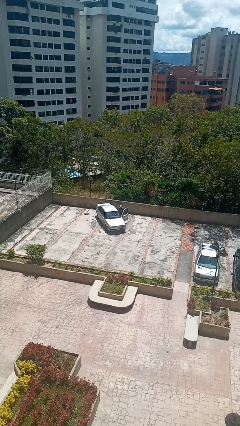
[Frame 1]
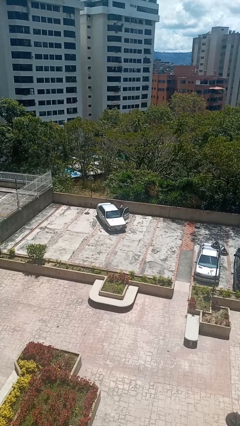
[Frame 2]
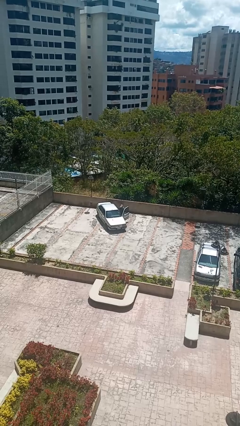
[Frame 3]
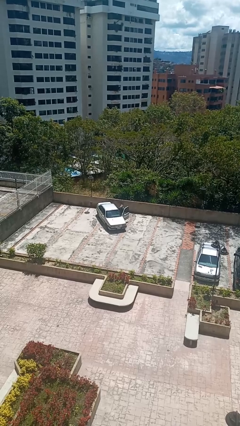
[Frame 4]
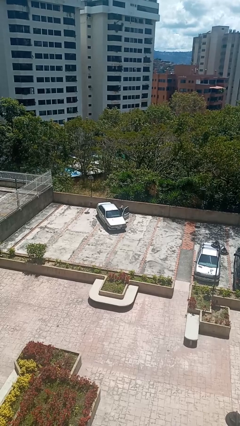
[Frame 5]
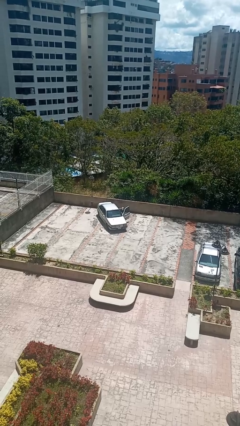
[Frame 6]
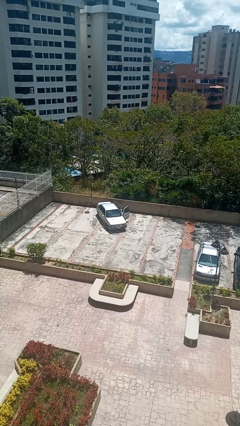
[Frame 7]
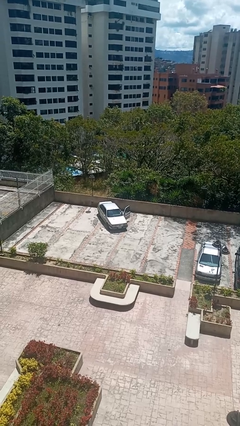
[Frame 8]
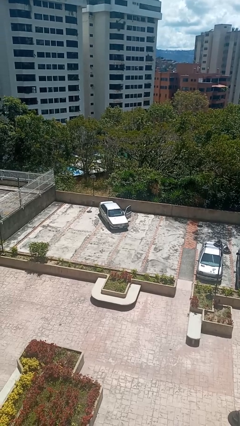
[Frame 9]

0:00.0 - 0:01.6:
person enters car

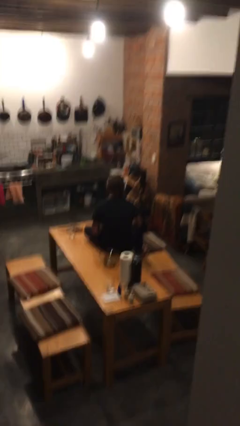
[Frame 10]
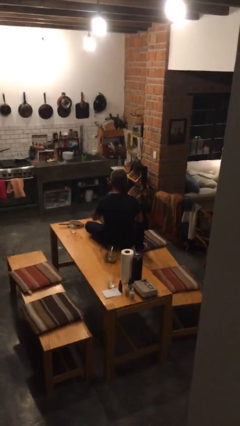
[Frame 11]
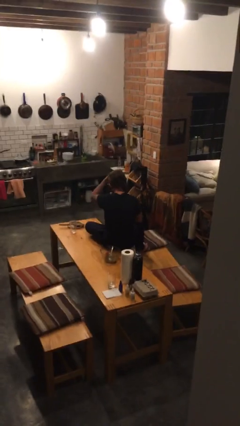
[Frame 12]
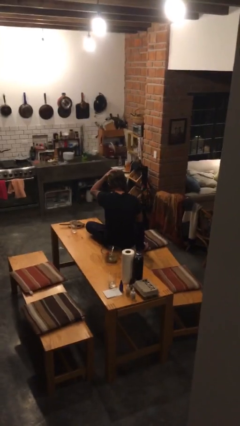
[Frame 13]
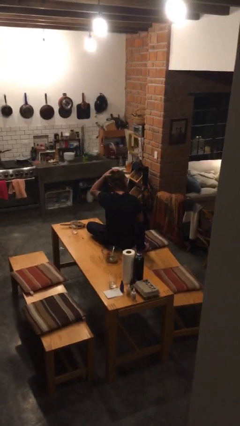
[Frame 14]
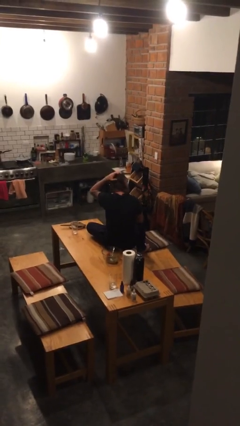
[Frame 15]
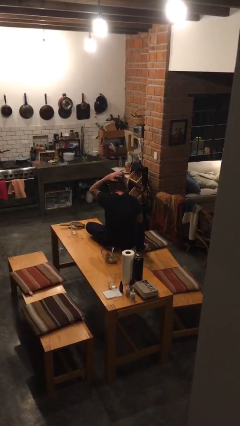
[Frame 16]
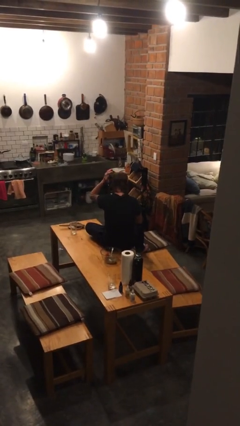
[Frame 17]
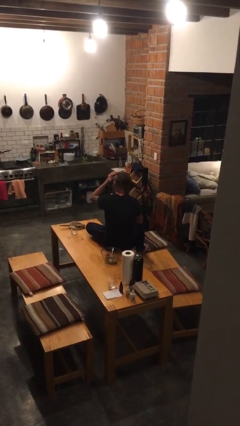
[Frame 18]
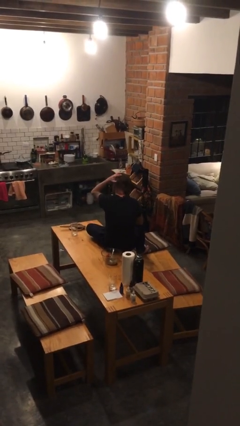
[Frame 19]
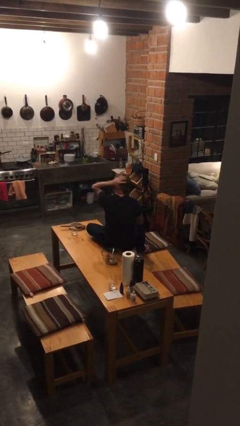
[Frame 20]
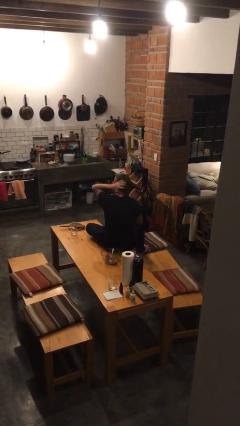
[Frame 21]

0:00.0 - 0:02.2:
person strokes hair

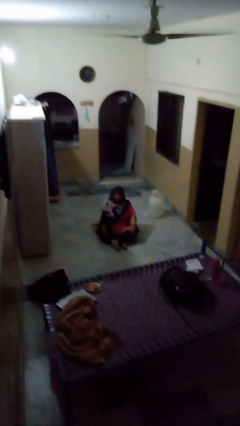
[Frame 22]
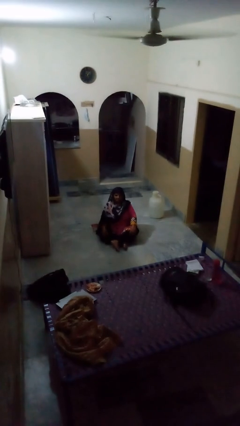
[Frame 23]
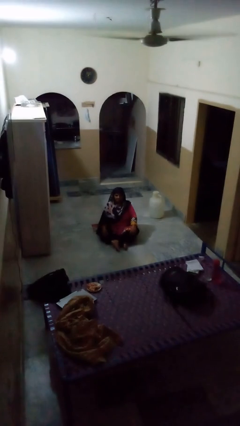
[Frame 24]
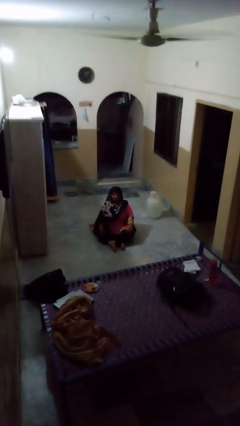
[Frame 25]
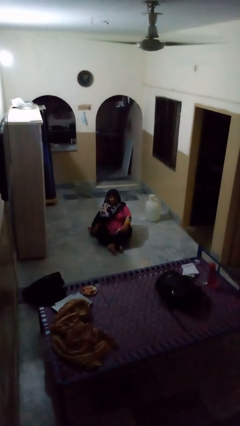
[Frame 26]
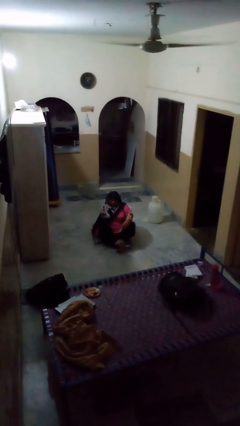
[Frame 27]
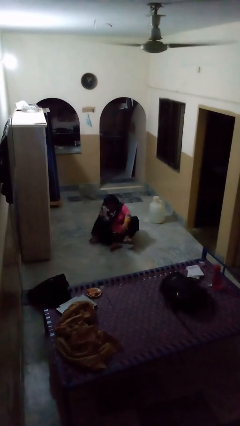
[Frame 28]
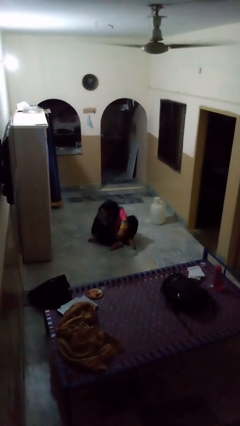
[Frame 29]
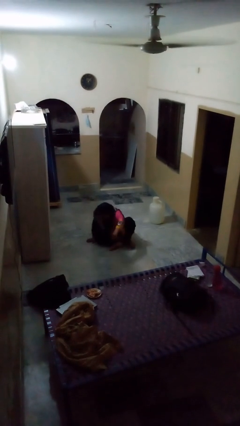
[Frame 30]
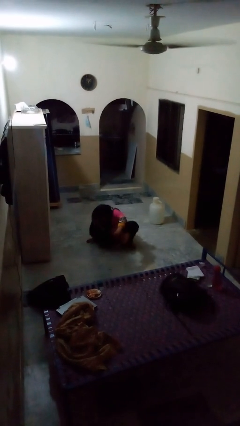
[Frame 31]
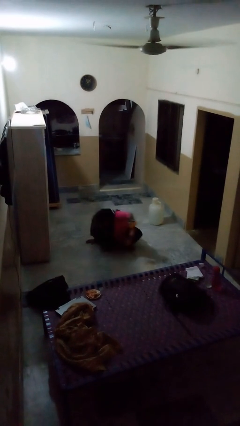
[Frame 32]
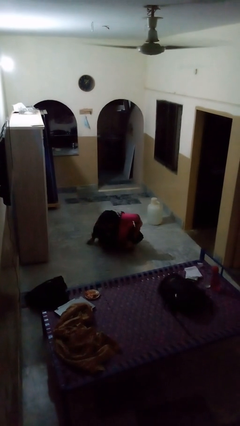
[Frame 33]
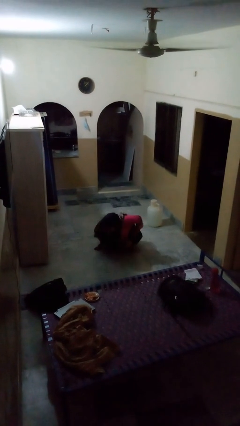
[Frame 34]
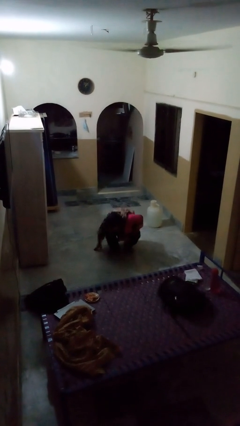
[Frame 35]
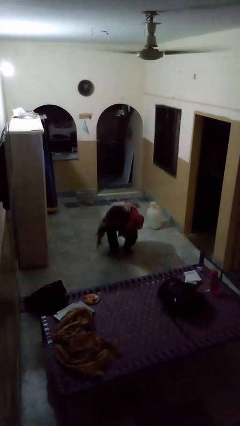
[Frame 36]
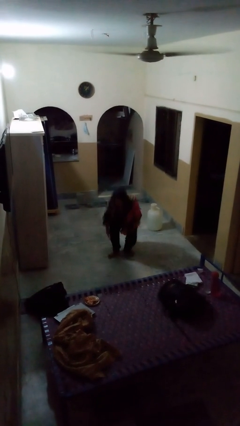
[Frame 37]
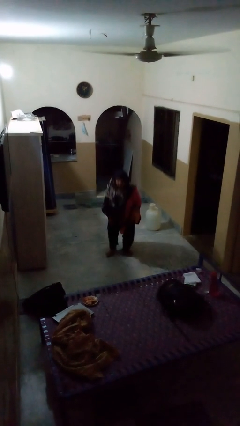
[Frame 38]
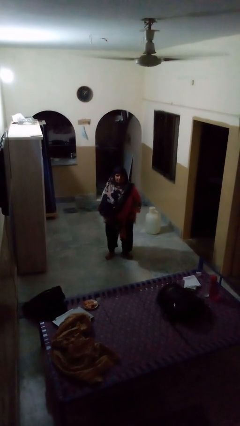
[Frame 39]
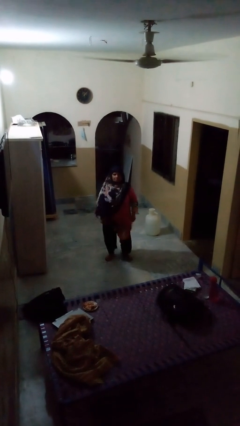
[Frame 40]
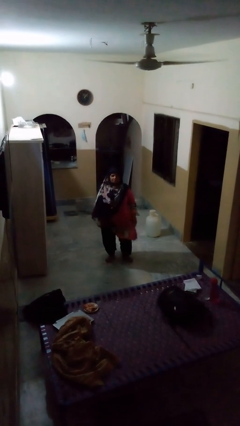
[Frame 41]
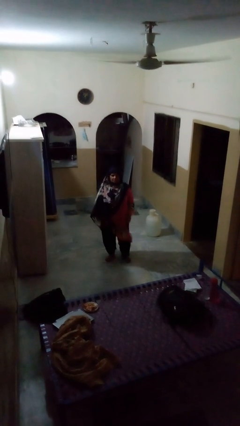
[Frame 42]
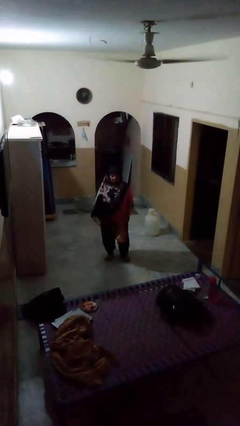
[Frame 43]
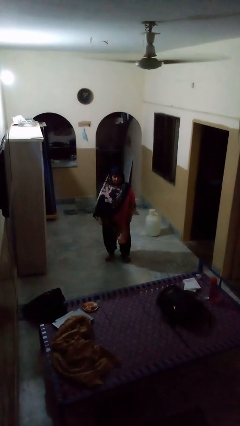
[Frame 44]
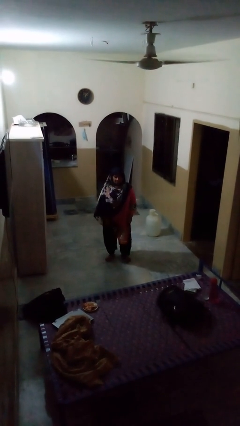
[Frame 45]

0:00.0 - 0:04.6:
person stands up from floor

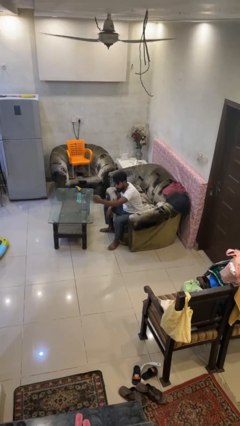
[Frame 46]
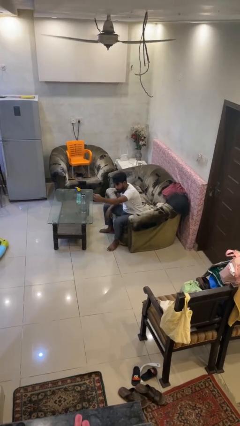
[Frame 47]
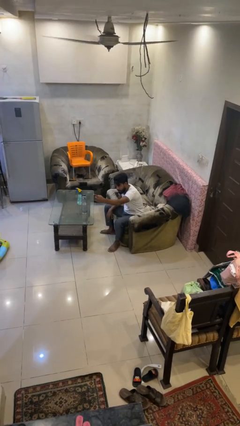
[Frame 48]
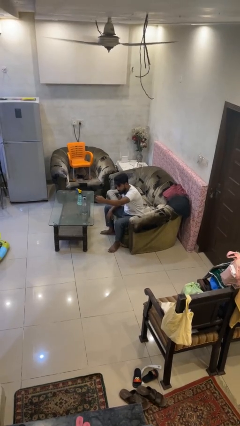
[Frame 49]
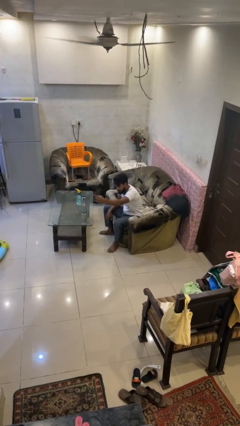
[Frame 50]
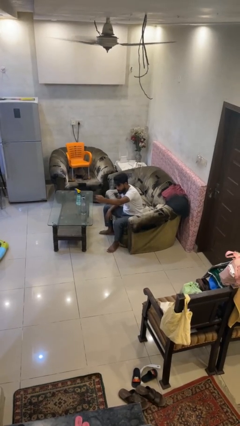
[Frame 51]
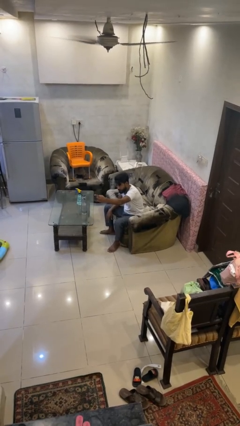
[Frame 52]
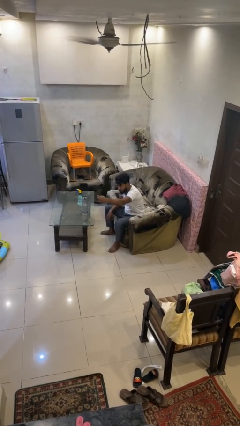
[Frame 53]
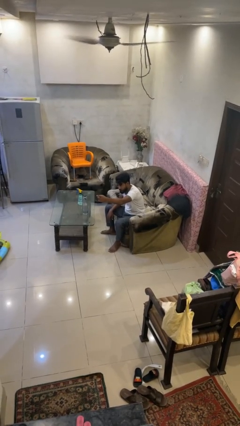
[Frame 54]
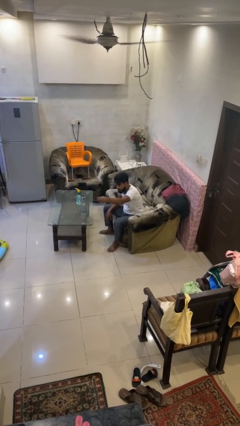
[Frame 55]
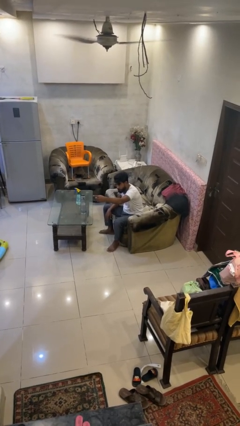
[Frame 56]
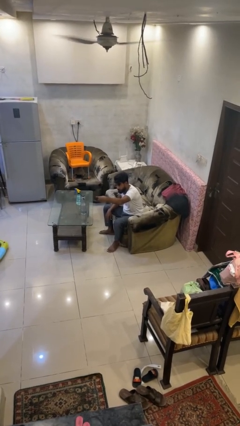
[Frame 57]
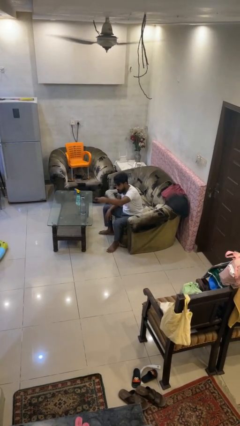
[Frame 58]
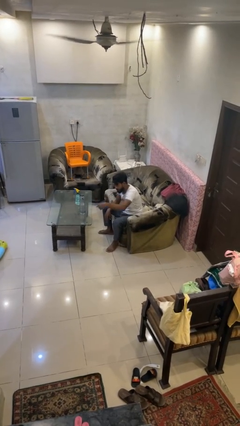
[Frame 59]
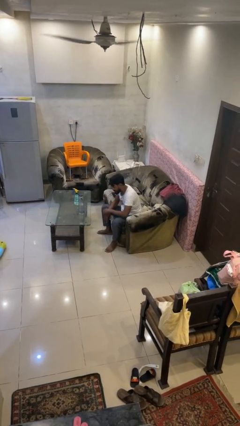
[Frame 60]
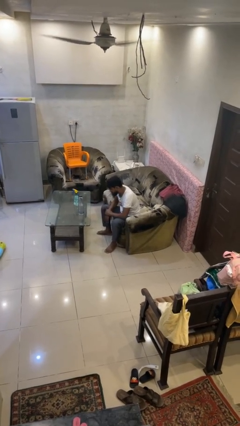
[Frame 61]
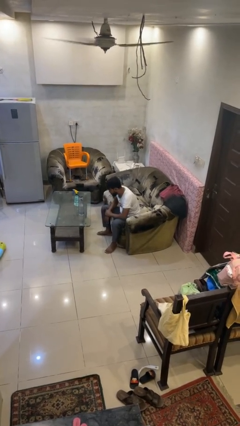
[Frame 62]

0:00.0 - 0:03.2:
person gestures come here

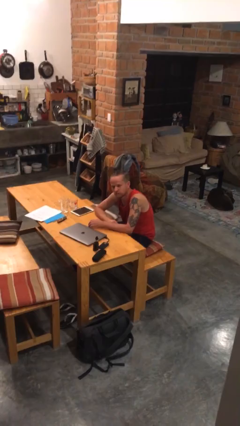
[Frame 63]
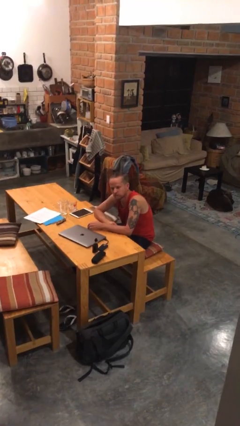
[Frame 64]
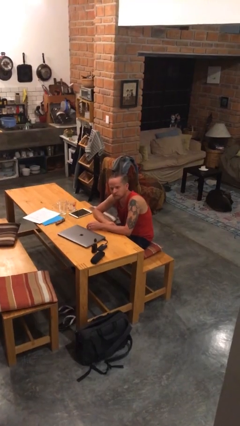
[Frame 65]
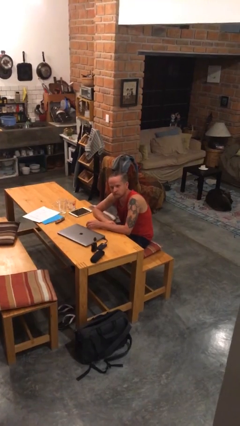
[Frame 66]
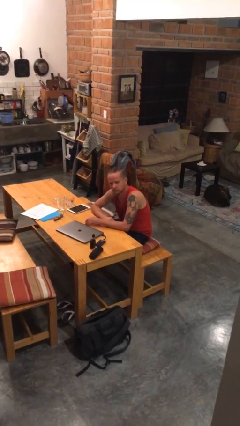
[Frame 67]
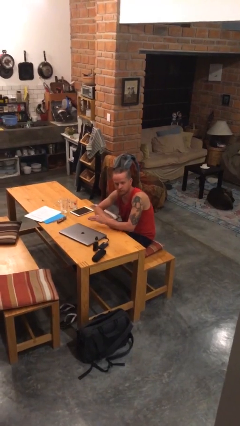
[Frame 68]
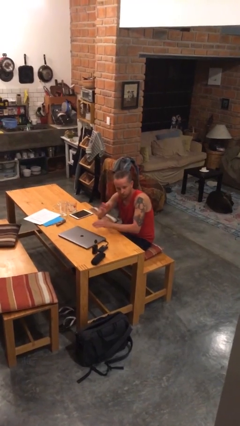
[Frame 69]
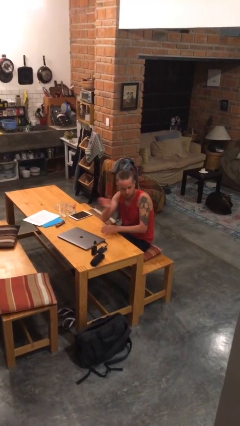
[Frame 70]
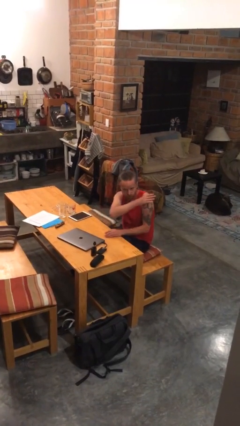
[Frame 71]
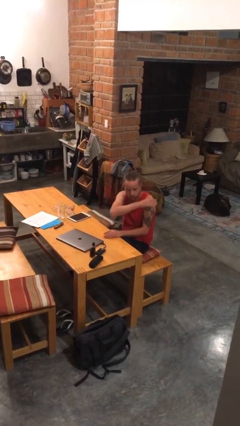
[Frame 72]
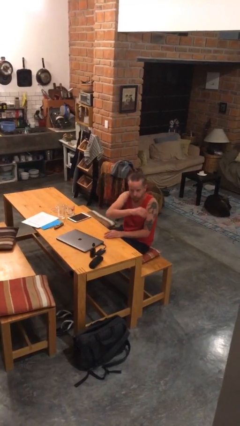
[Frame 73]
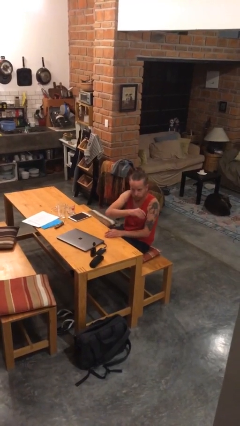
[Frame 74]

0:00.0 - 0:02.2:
person gestures swipe left

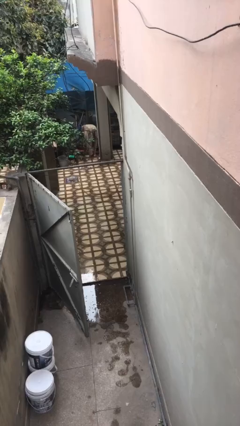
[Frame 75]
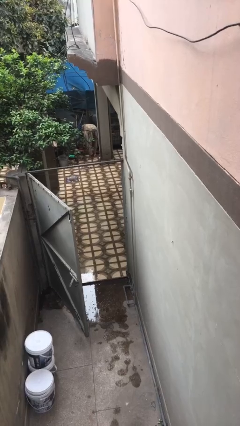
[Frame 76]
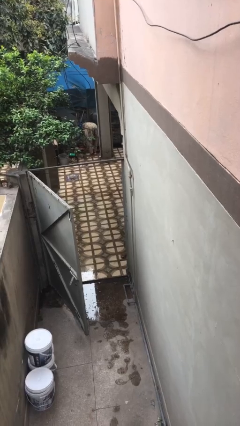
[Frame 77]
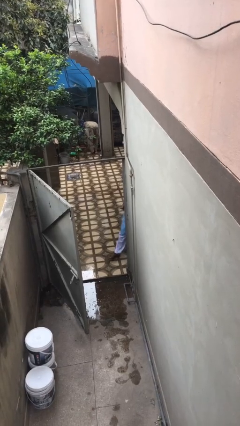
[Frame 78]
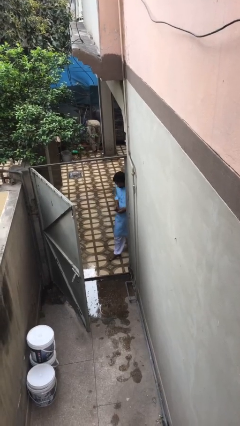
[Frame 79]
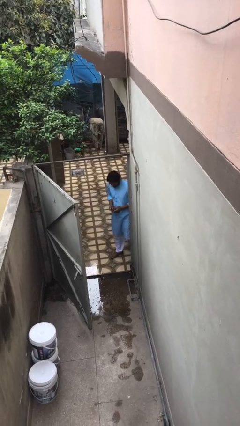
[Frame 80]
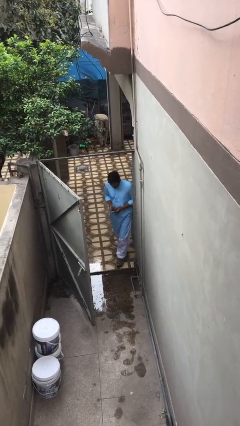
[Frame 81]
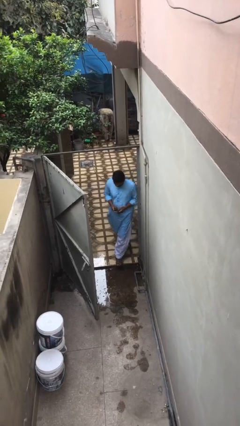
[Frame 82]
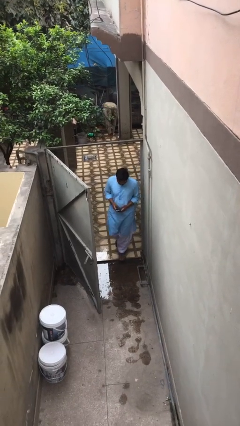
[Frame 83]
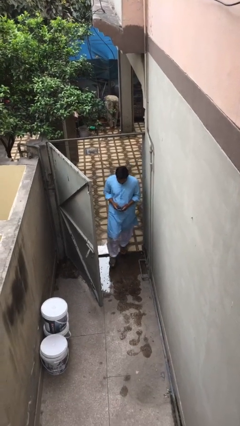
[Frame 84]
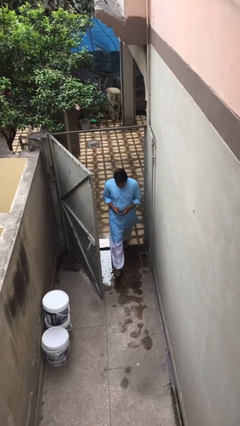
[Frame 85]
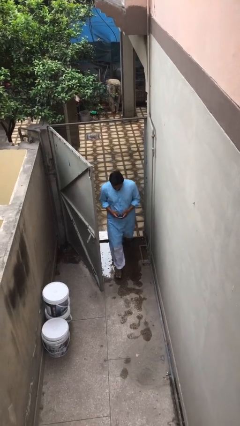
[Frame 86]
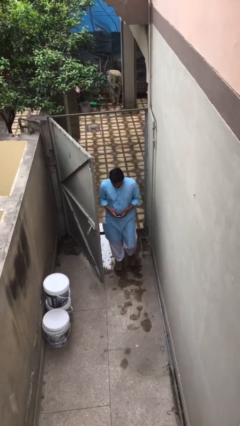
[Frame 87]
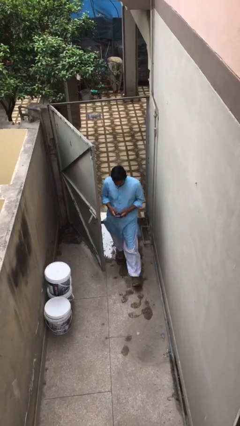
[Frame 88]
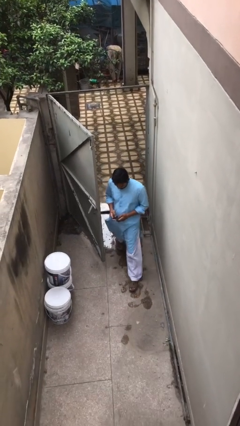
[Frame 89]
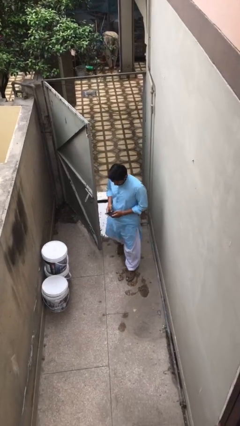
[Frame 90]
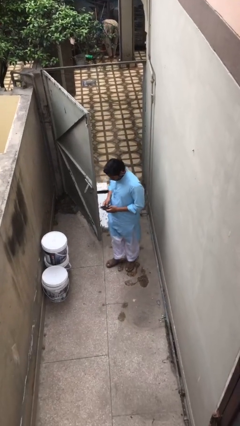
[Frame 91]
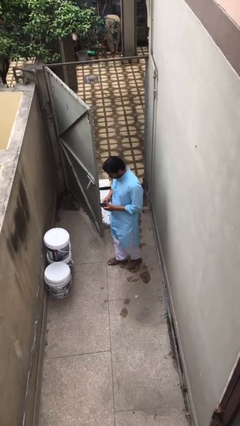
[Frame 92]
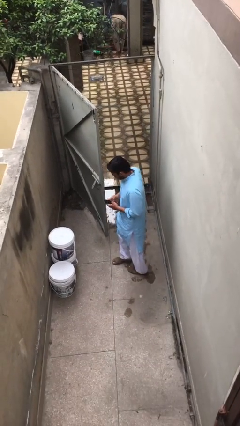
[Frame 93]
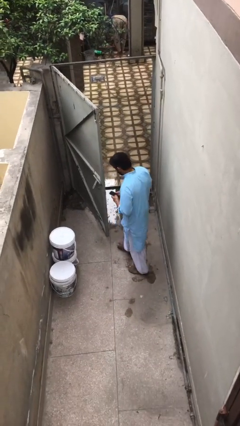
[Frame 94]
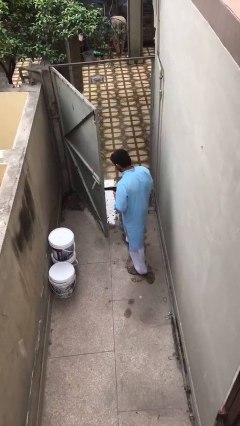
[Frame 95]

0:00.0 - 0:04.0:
person enters scene through structure
